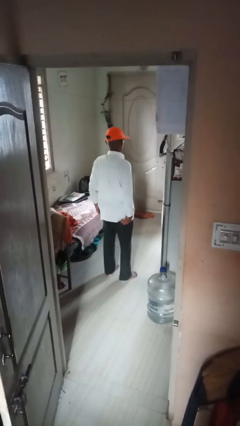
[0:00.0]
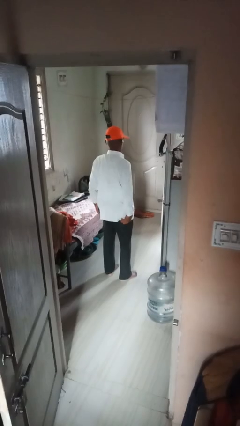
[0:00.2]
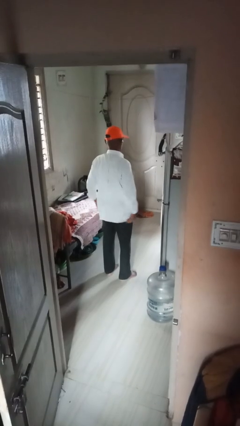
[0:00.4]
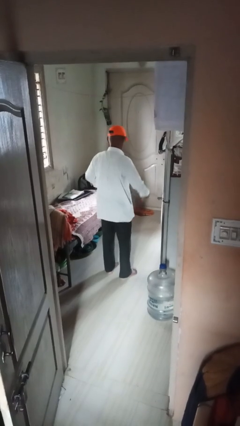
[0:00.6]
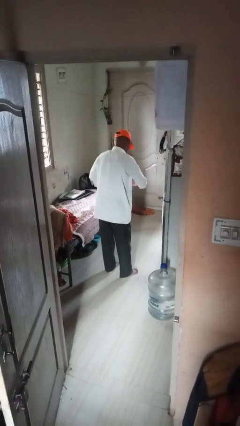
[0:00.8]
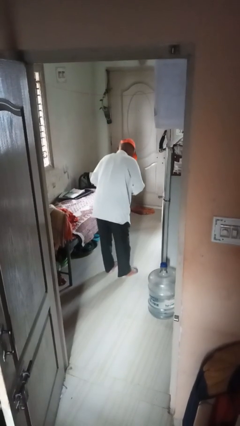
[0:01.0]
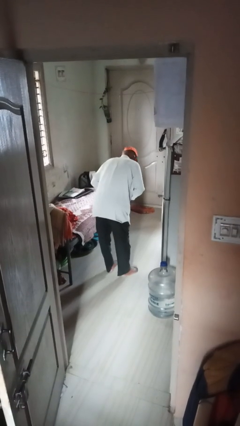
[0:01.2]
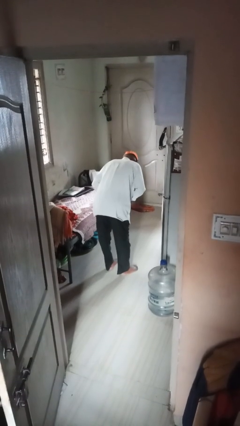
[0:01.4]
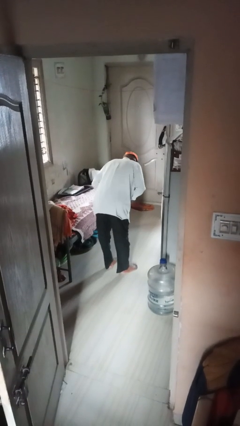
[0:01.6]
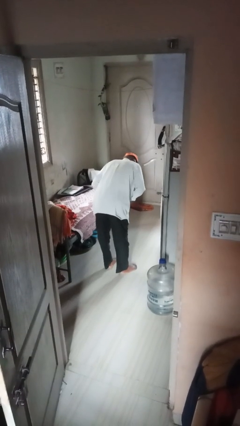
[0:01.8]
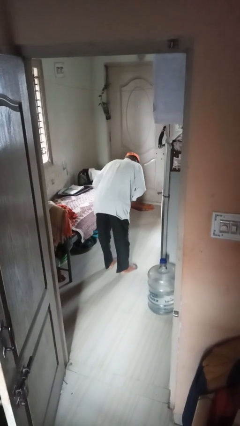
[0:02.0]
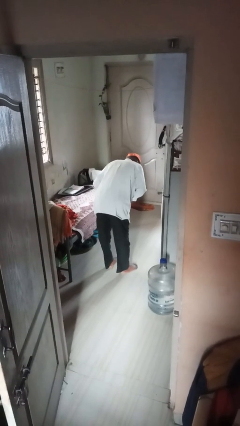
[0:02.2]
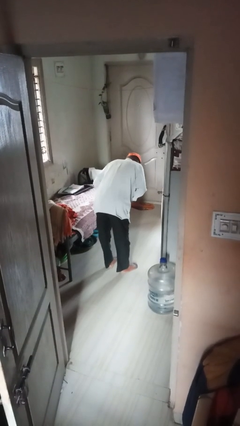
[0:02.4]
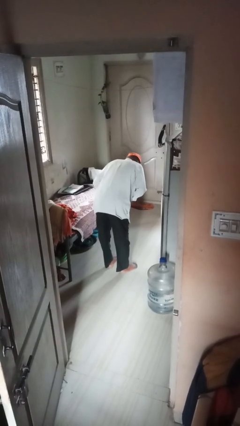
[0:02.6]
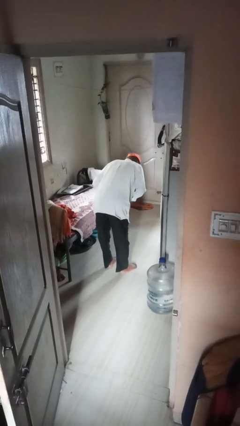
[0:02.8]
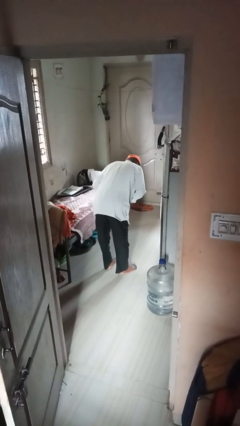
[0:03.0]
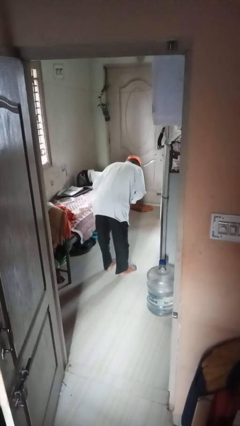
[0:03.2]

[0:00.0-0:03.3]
person bows

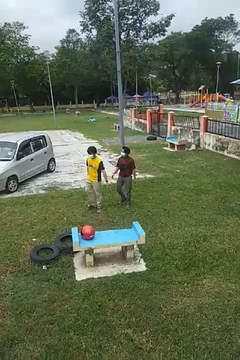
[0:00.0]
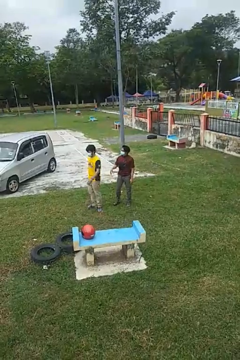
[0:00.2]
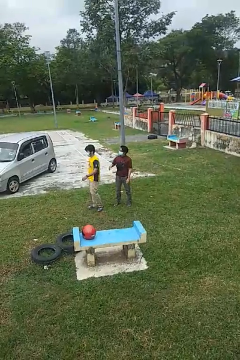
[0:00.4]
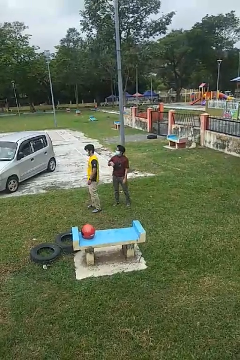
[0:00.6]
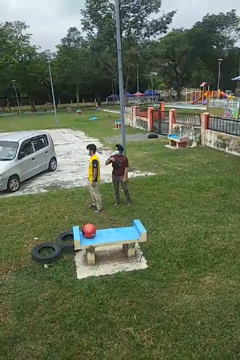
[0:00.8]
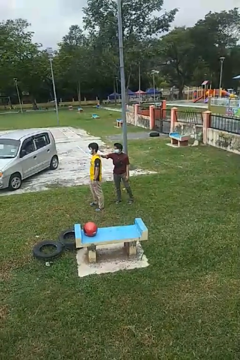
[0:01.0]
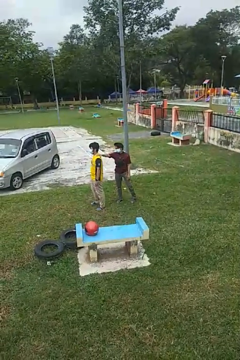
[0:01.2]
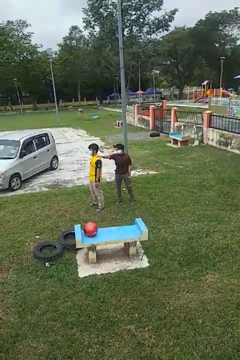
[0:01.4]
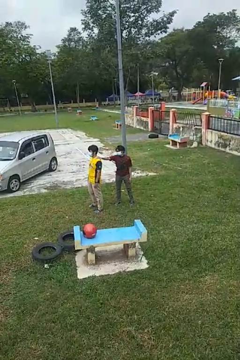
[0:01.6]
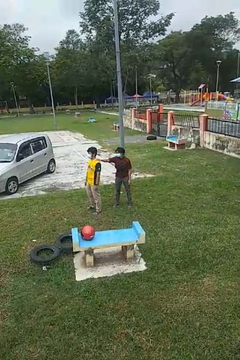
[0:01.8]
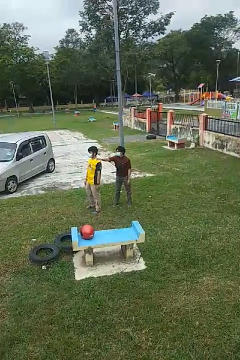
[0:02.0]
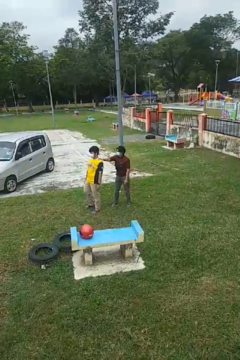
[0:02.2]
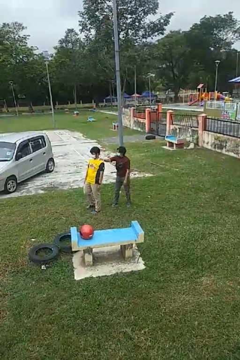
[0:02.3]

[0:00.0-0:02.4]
person grabs person by shoulder

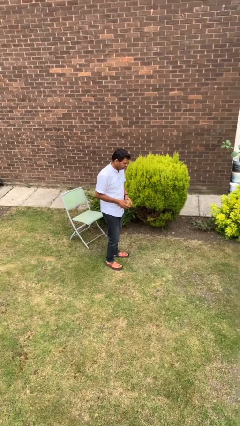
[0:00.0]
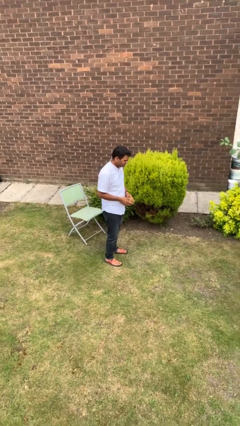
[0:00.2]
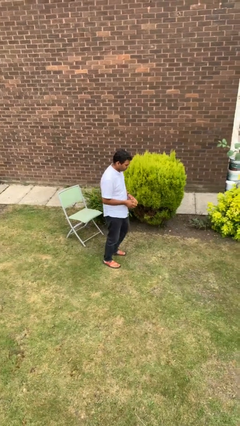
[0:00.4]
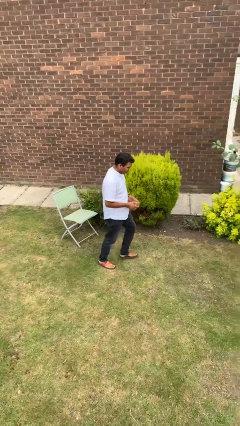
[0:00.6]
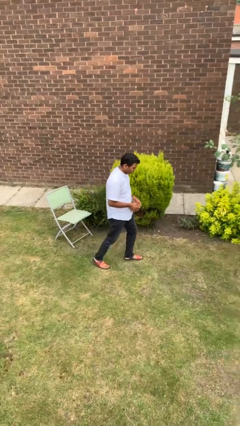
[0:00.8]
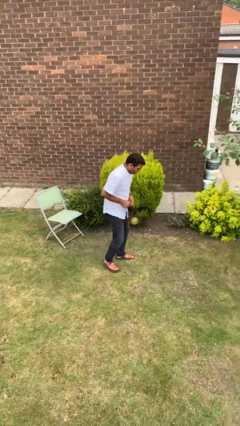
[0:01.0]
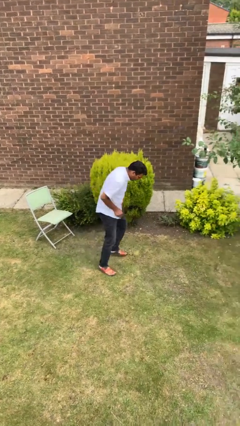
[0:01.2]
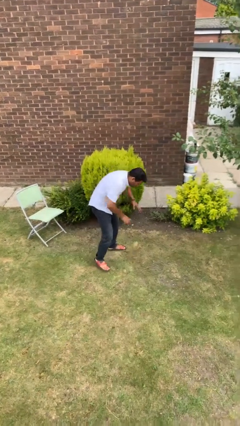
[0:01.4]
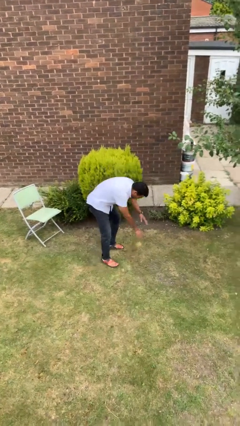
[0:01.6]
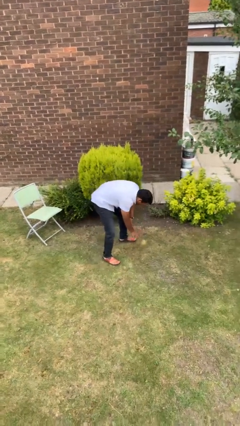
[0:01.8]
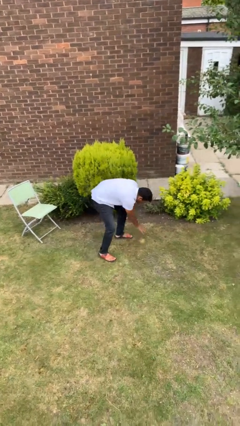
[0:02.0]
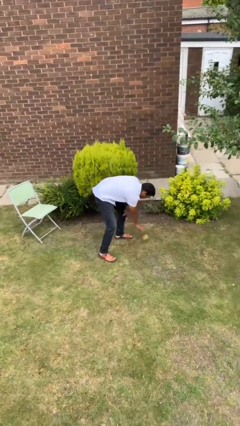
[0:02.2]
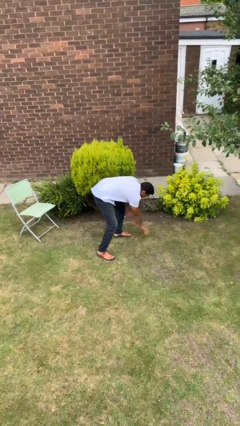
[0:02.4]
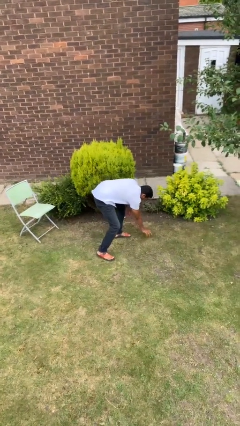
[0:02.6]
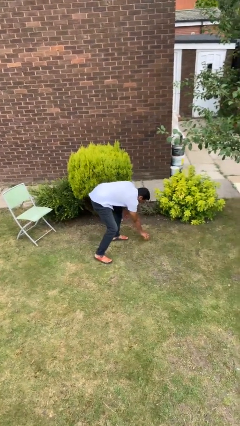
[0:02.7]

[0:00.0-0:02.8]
person drops object

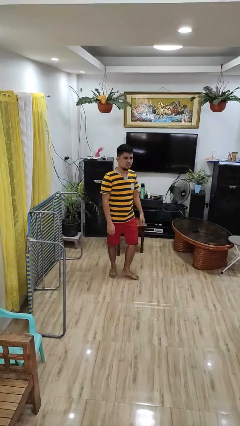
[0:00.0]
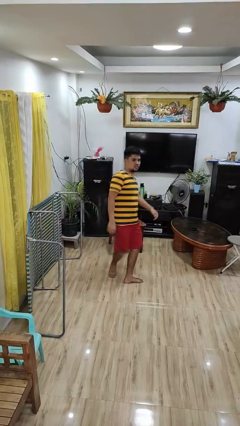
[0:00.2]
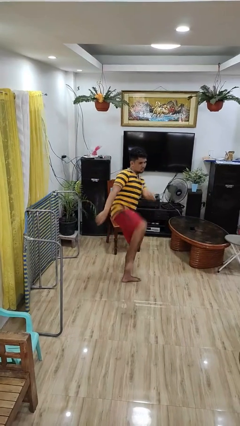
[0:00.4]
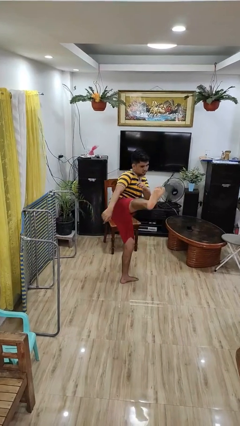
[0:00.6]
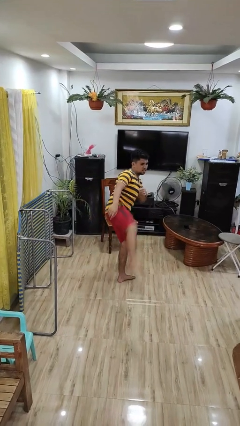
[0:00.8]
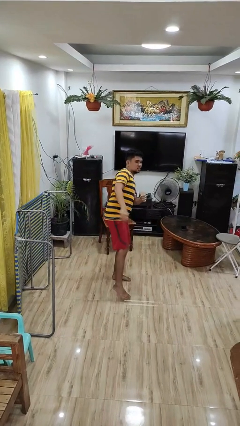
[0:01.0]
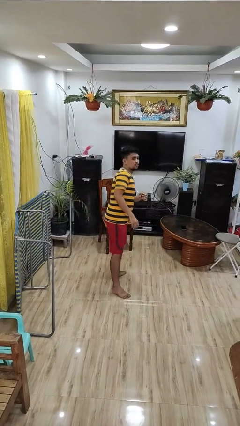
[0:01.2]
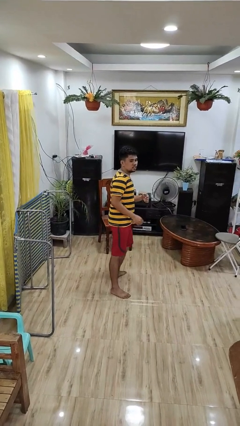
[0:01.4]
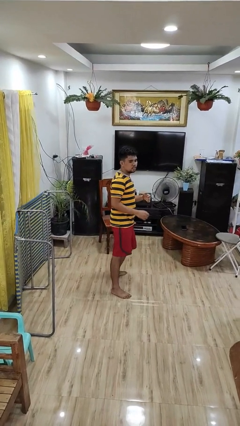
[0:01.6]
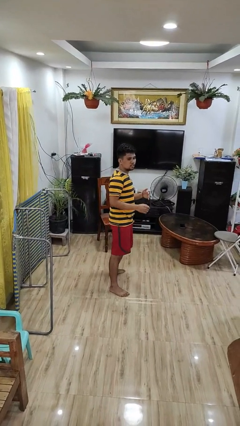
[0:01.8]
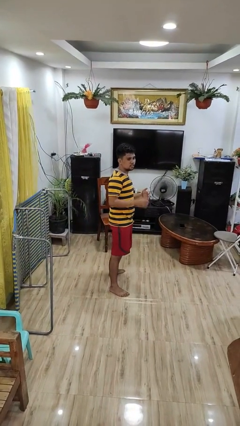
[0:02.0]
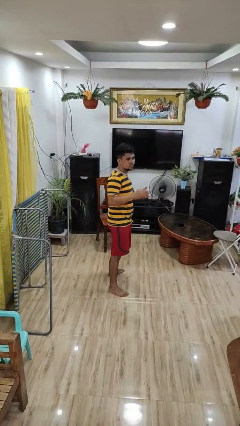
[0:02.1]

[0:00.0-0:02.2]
person karate kicks

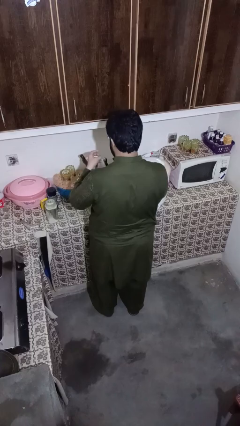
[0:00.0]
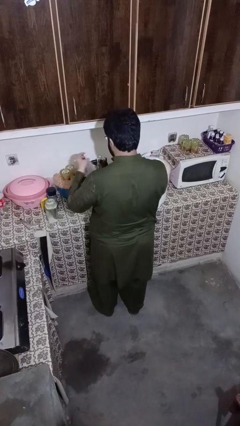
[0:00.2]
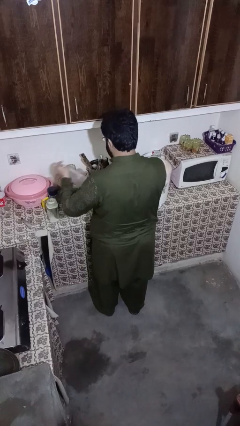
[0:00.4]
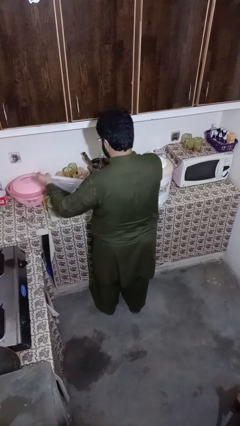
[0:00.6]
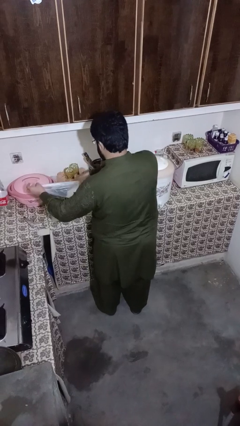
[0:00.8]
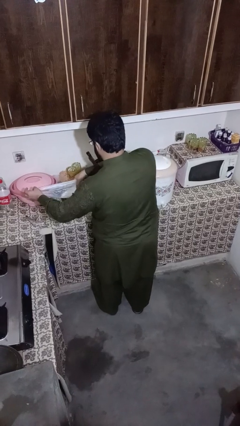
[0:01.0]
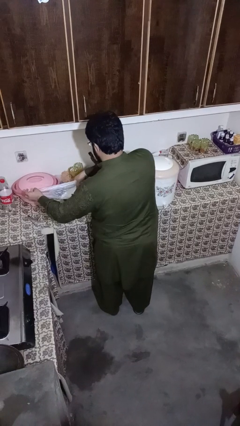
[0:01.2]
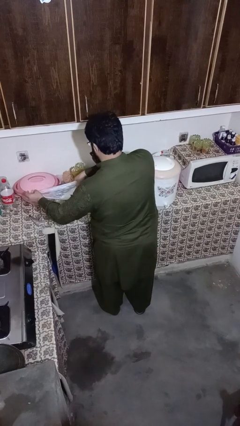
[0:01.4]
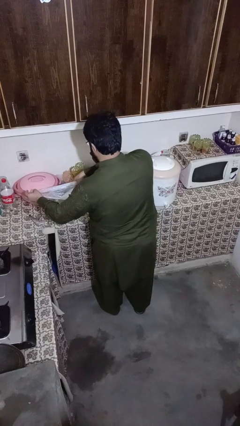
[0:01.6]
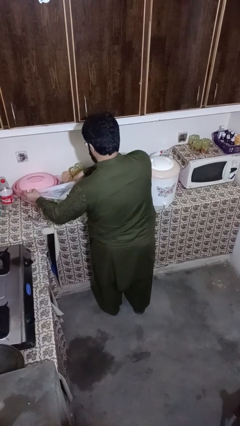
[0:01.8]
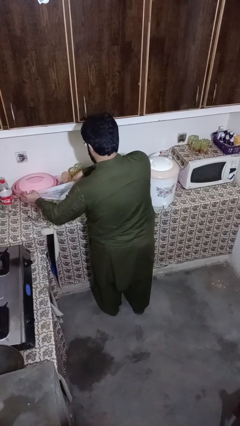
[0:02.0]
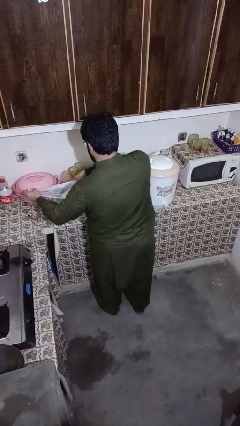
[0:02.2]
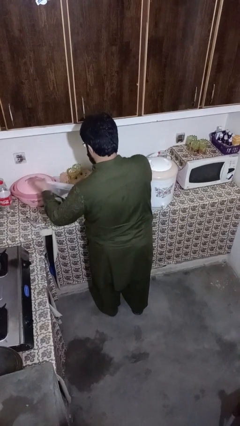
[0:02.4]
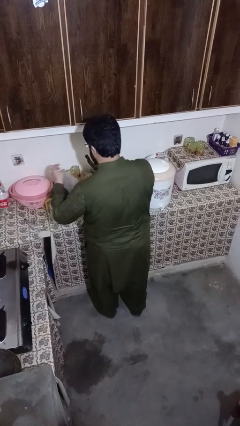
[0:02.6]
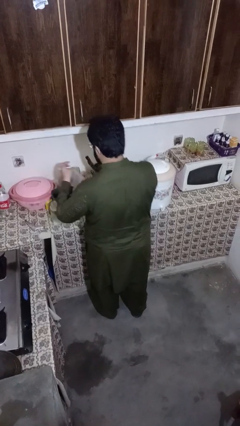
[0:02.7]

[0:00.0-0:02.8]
person pours into bowl

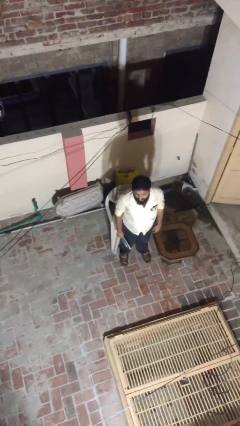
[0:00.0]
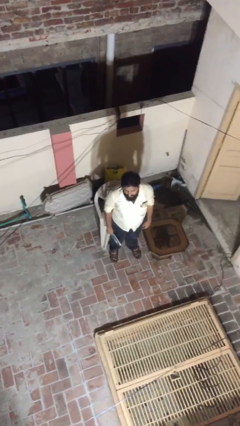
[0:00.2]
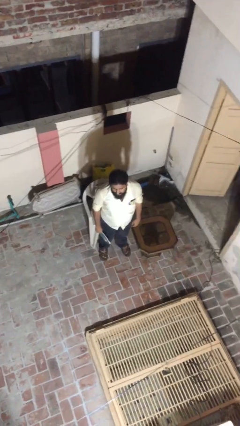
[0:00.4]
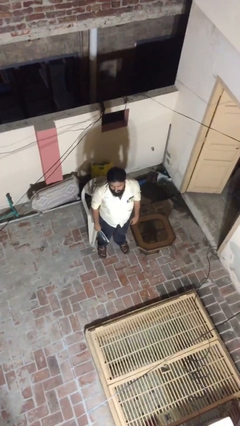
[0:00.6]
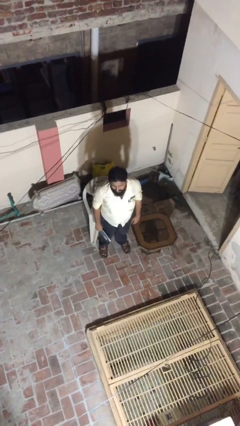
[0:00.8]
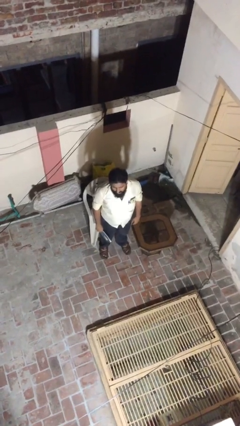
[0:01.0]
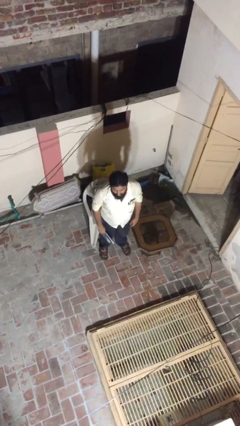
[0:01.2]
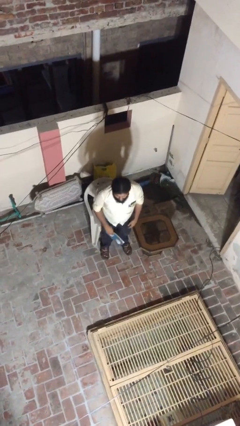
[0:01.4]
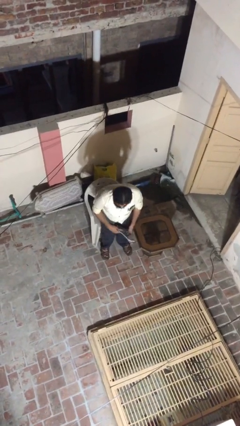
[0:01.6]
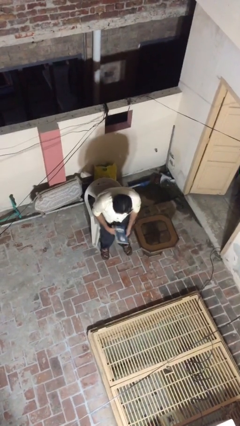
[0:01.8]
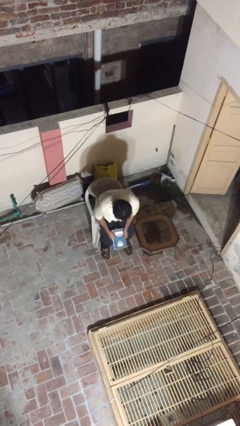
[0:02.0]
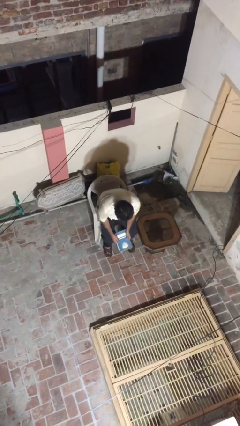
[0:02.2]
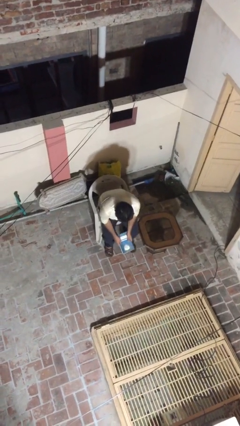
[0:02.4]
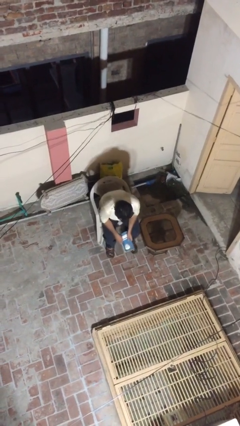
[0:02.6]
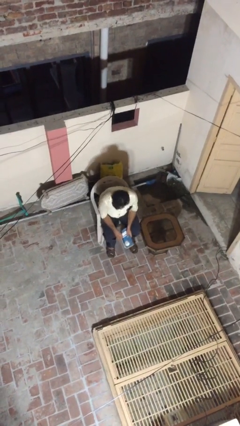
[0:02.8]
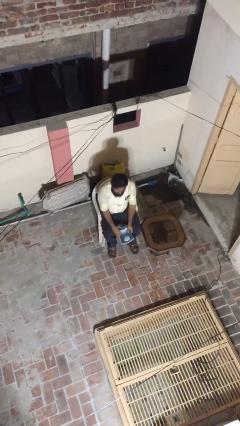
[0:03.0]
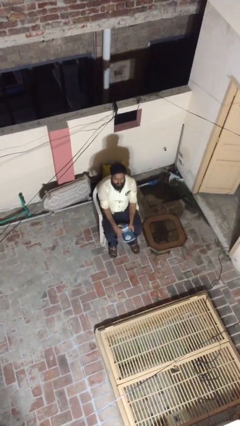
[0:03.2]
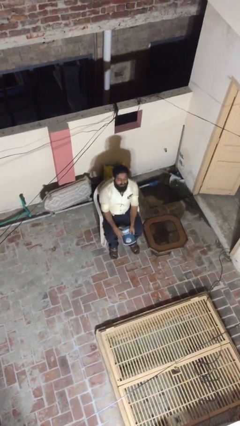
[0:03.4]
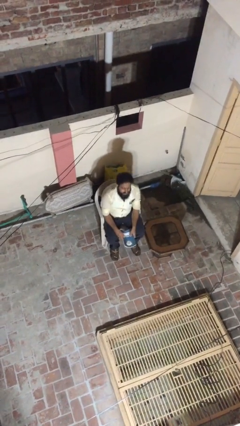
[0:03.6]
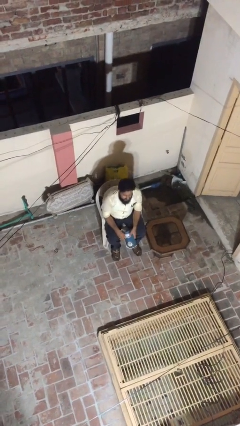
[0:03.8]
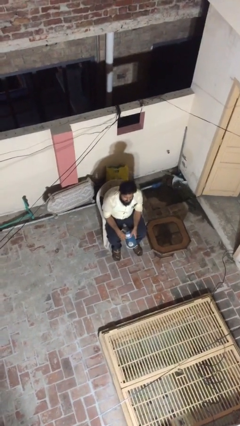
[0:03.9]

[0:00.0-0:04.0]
person sits down

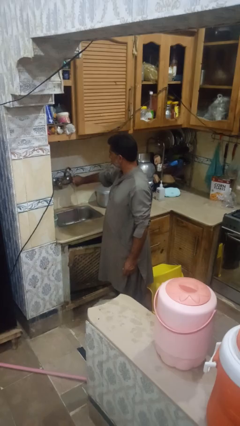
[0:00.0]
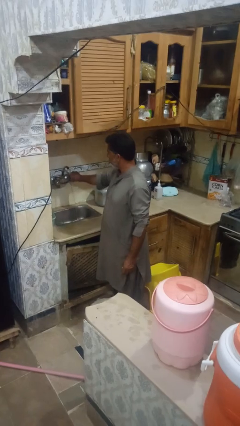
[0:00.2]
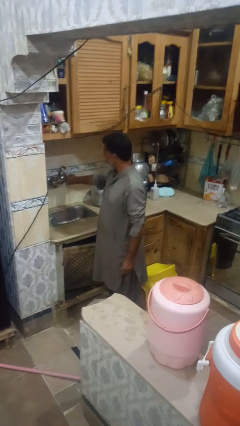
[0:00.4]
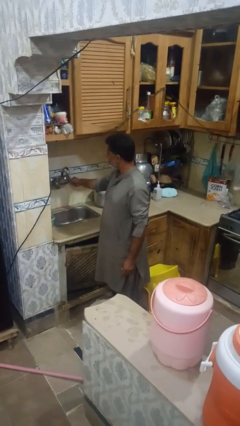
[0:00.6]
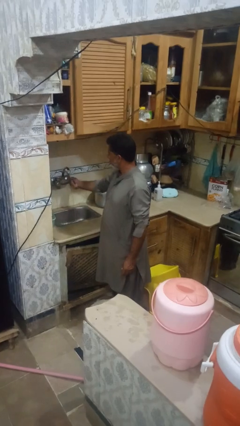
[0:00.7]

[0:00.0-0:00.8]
person turns off faucet
